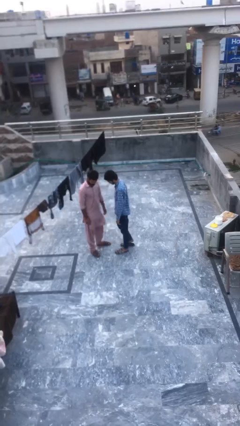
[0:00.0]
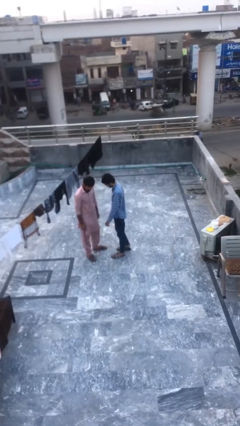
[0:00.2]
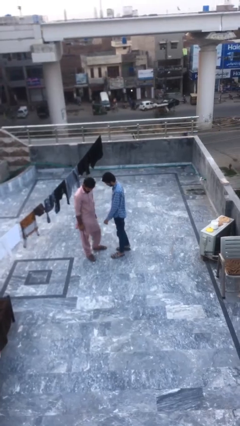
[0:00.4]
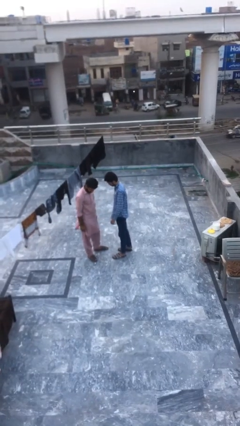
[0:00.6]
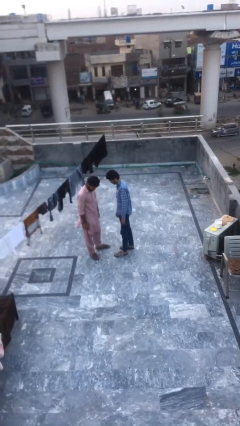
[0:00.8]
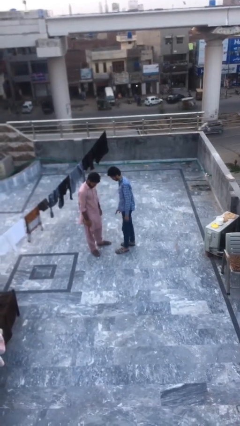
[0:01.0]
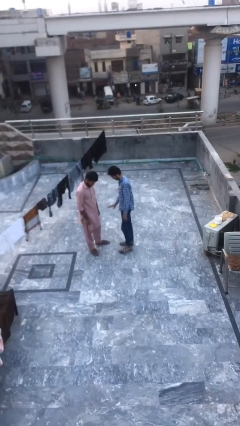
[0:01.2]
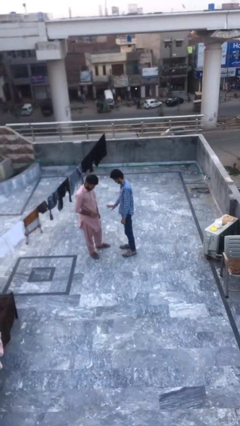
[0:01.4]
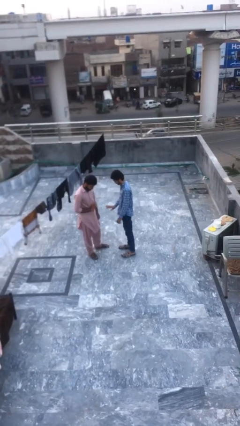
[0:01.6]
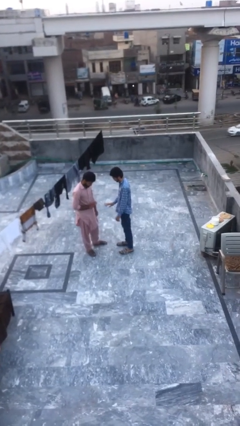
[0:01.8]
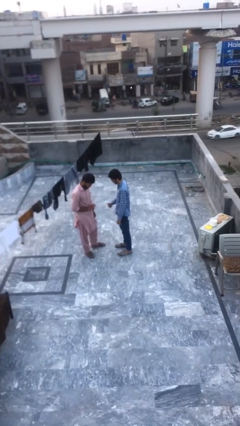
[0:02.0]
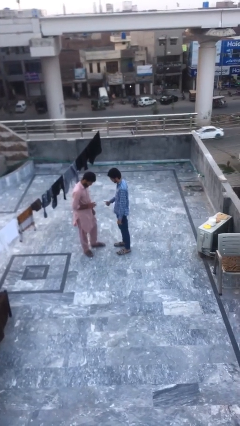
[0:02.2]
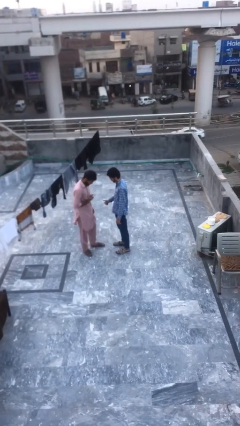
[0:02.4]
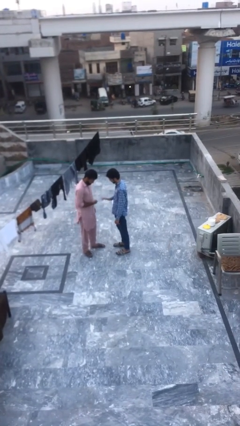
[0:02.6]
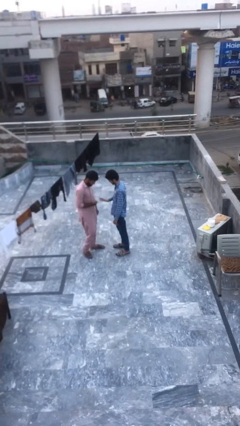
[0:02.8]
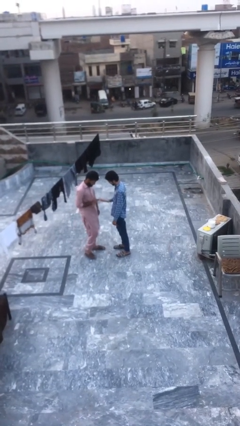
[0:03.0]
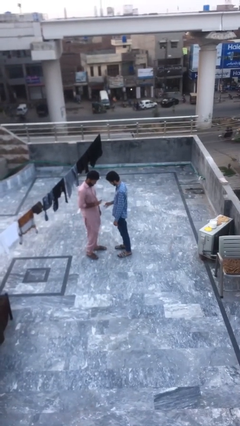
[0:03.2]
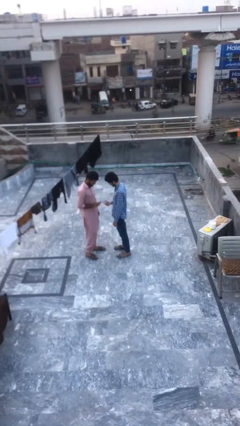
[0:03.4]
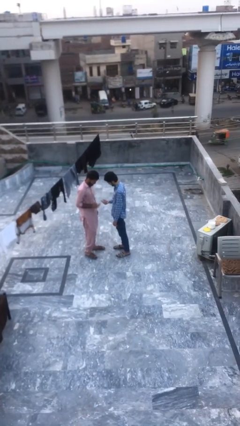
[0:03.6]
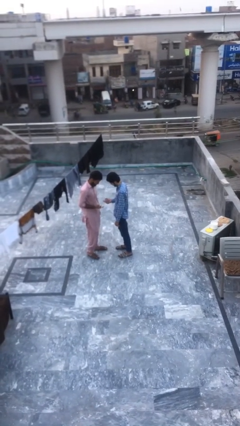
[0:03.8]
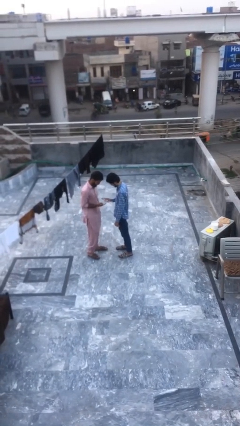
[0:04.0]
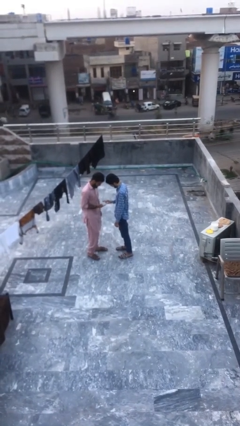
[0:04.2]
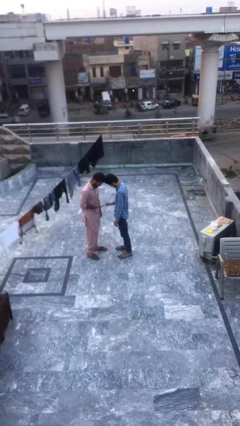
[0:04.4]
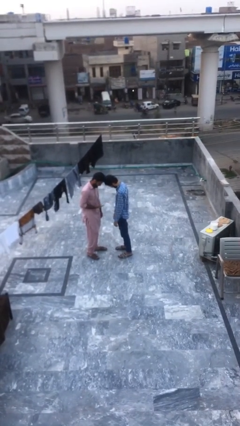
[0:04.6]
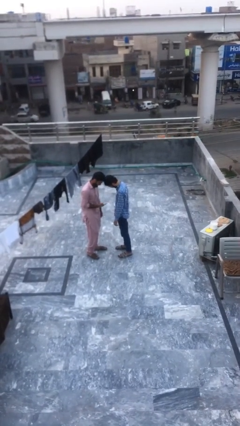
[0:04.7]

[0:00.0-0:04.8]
person talks to person

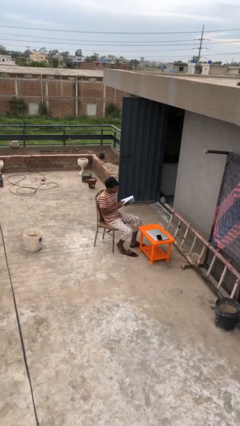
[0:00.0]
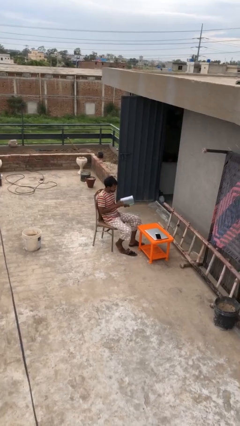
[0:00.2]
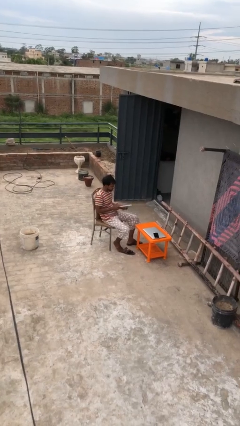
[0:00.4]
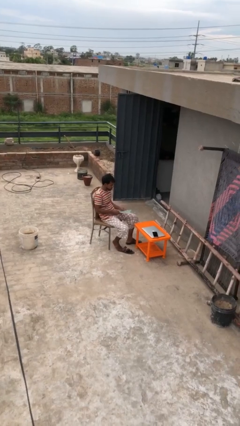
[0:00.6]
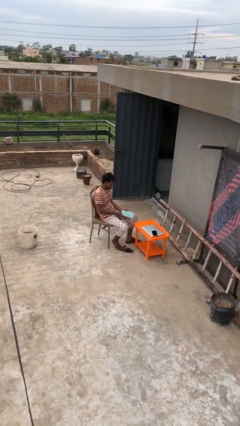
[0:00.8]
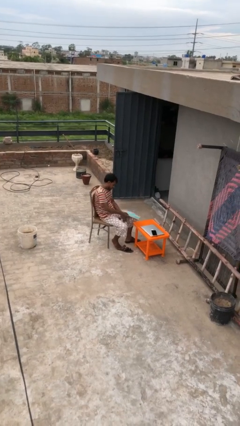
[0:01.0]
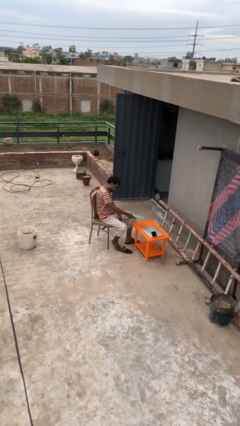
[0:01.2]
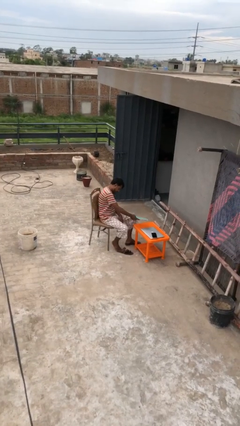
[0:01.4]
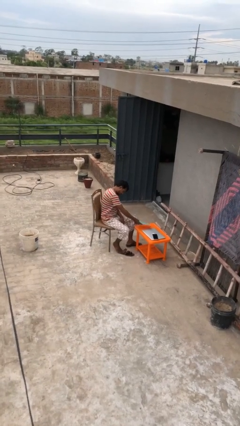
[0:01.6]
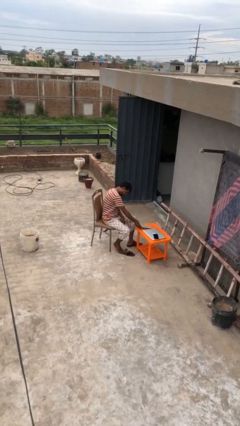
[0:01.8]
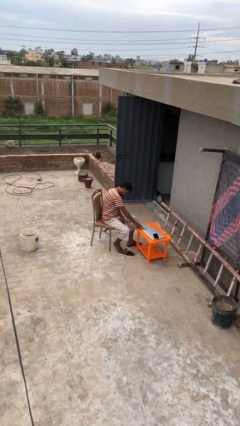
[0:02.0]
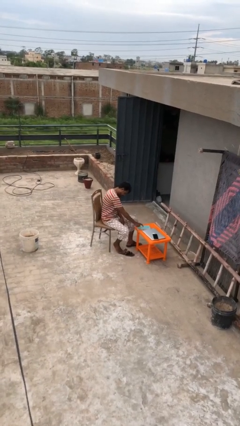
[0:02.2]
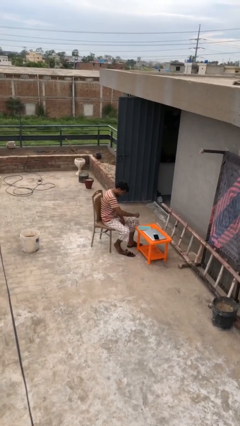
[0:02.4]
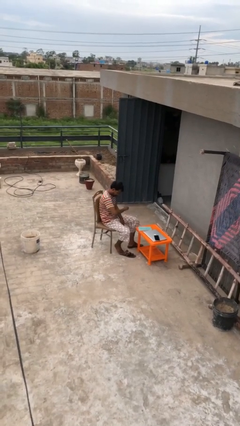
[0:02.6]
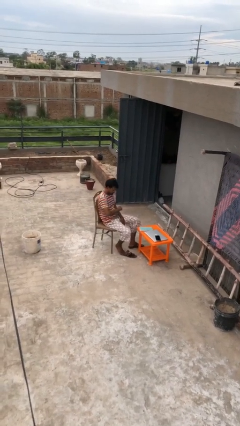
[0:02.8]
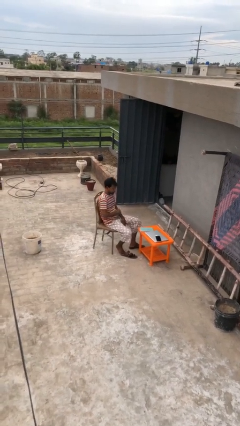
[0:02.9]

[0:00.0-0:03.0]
person puts down object on table

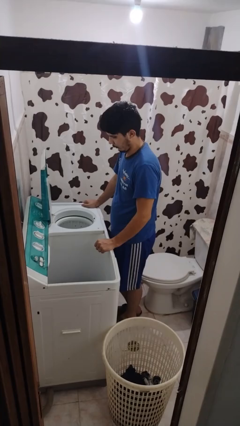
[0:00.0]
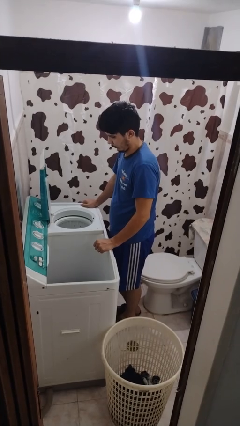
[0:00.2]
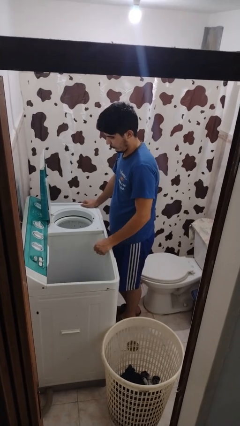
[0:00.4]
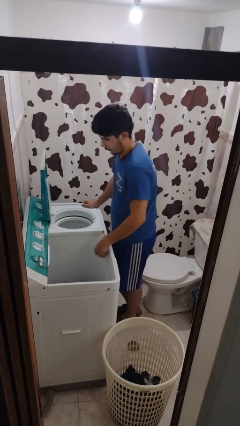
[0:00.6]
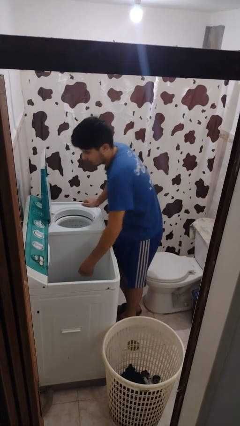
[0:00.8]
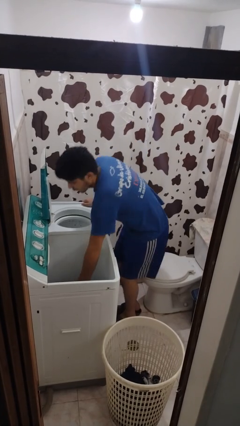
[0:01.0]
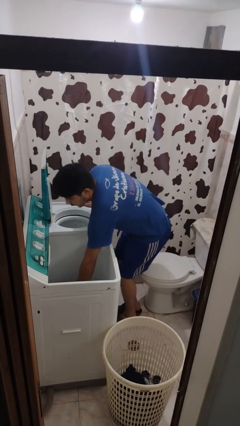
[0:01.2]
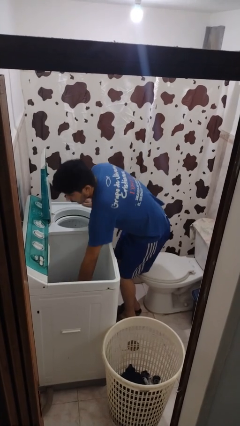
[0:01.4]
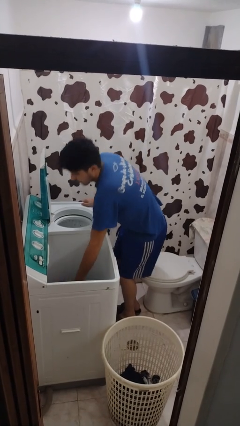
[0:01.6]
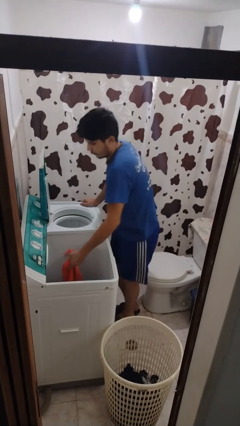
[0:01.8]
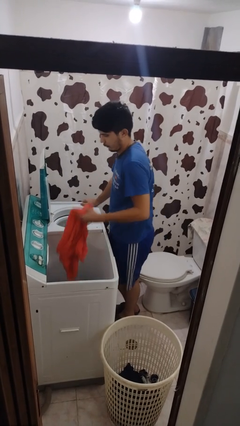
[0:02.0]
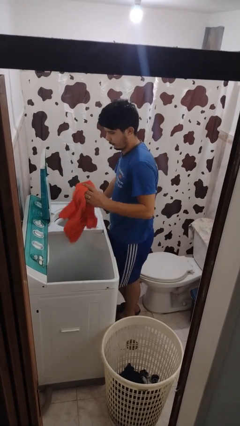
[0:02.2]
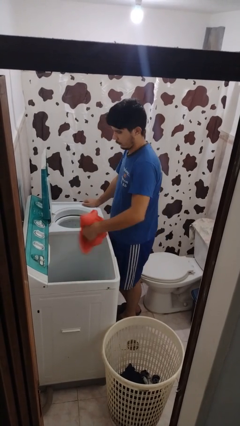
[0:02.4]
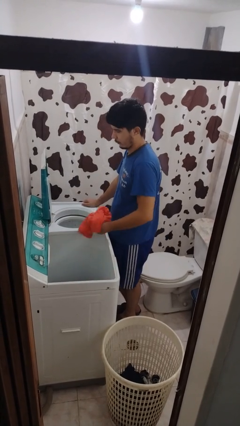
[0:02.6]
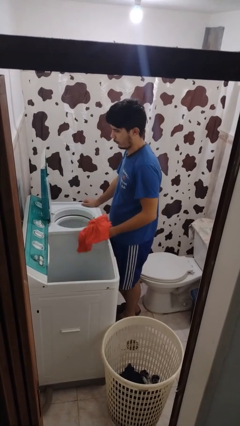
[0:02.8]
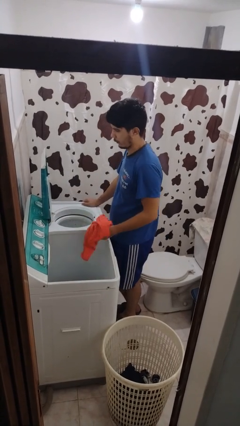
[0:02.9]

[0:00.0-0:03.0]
person unloads clotheswasher

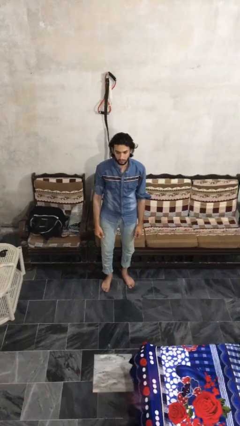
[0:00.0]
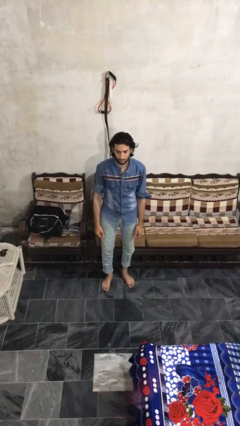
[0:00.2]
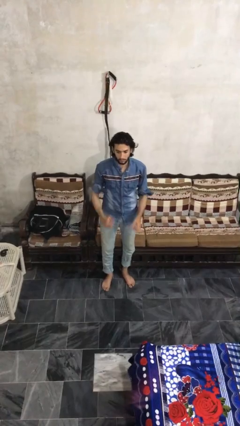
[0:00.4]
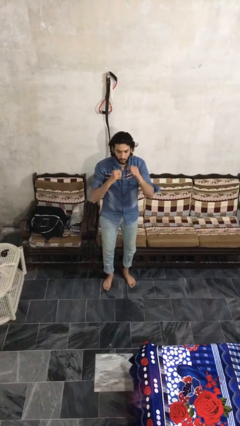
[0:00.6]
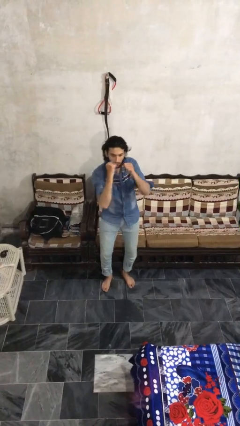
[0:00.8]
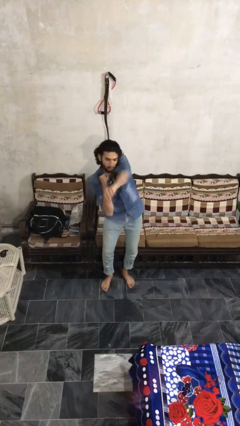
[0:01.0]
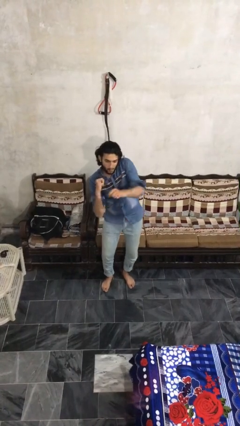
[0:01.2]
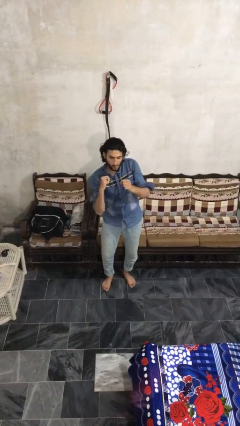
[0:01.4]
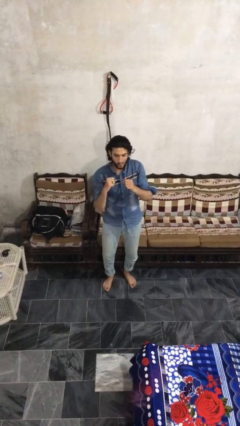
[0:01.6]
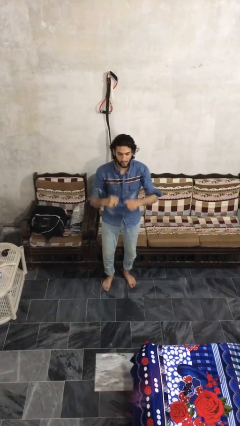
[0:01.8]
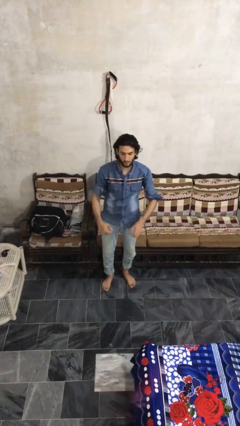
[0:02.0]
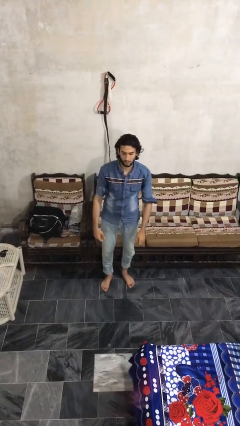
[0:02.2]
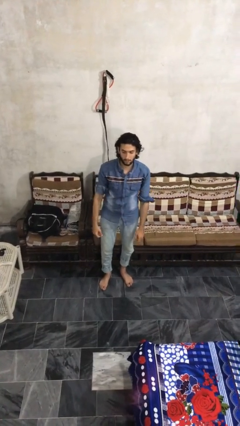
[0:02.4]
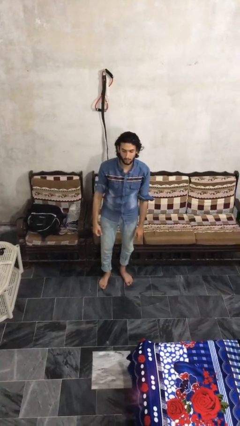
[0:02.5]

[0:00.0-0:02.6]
person punches

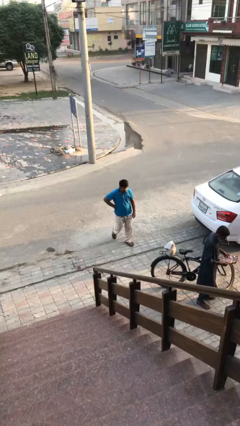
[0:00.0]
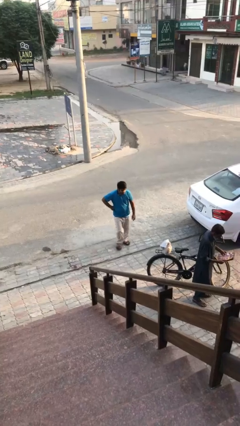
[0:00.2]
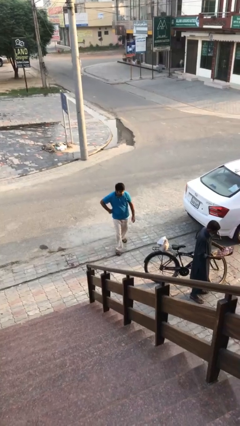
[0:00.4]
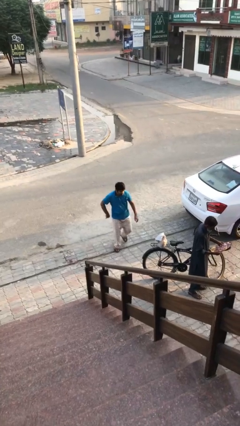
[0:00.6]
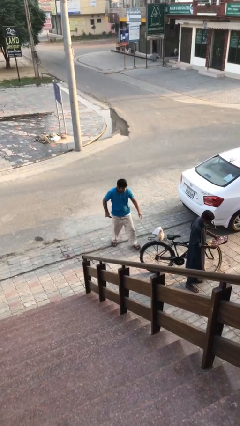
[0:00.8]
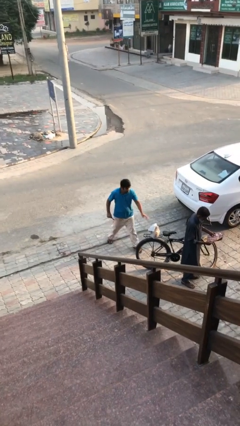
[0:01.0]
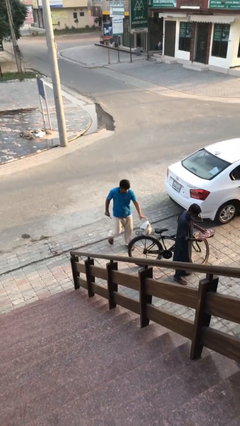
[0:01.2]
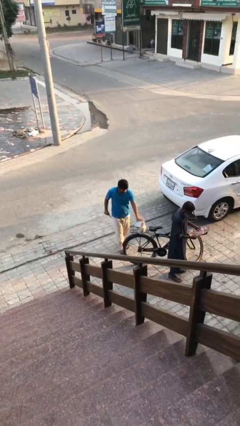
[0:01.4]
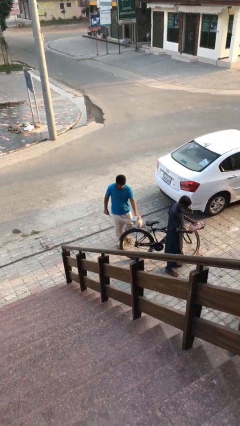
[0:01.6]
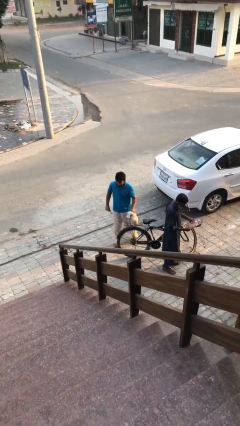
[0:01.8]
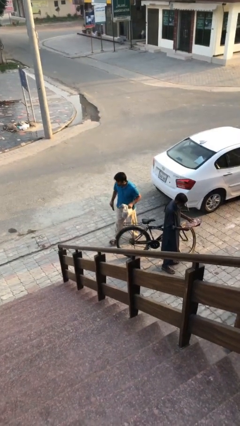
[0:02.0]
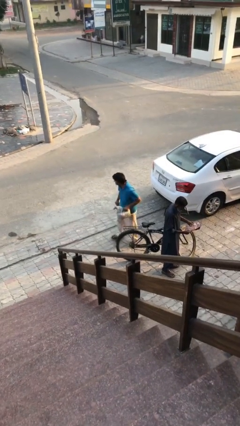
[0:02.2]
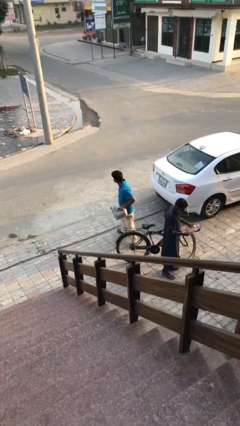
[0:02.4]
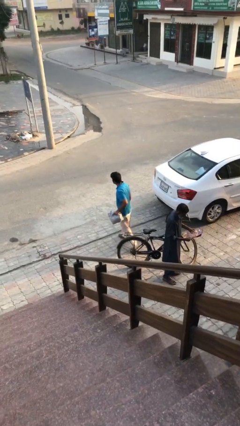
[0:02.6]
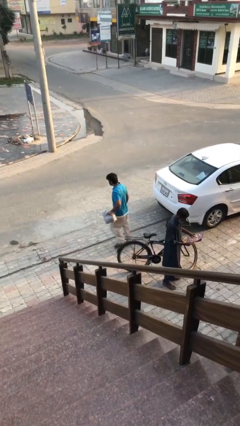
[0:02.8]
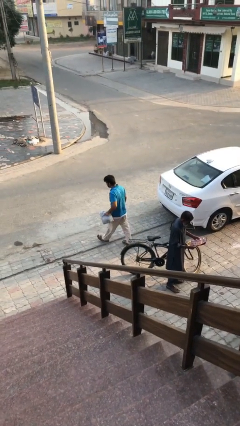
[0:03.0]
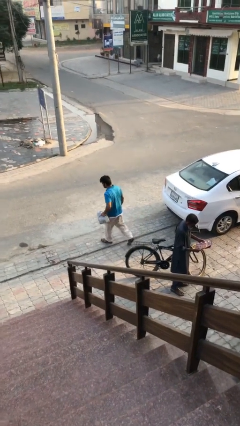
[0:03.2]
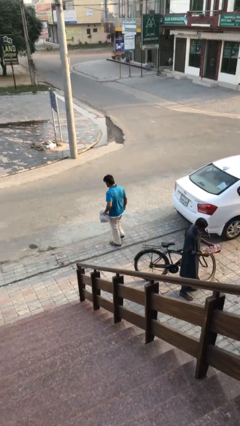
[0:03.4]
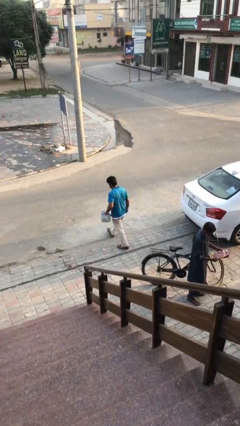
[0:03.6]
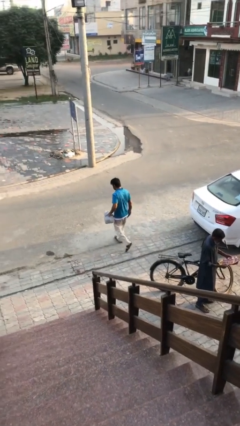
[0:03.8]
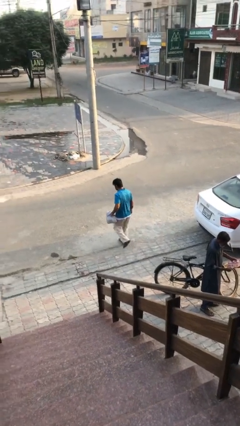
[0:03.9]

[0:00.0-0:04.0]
person steals object from person

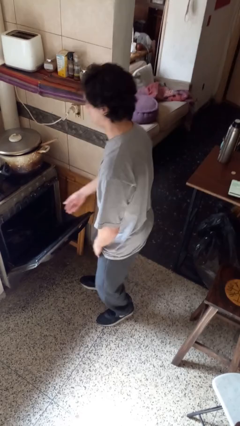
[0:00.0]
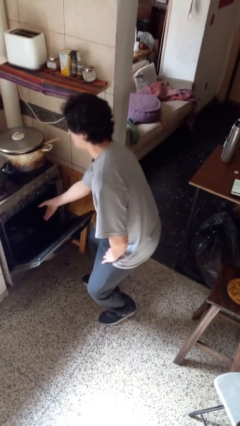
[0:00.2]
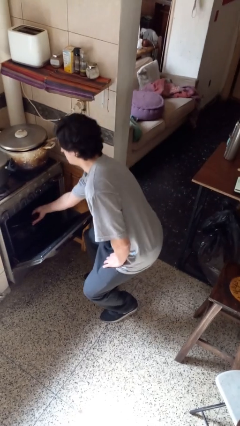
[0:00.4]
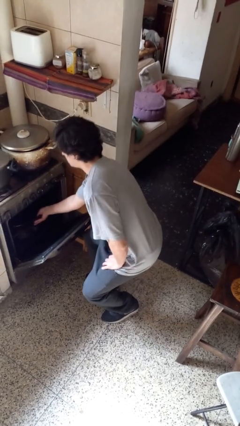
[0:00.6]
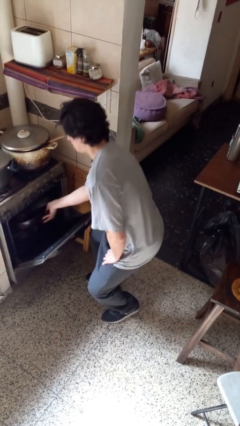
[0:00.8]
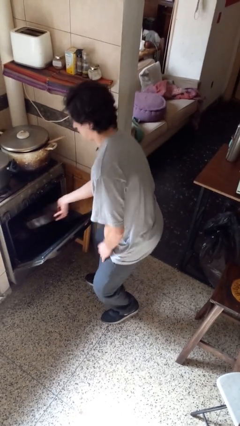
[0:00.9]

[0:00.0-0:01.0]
person takes object from oven
